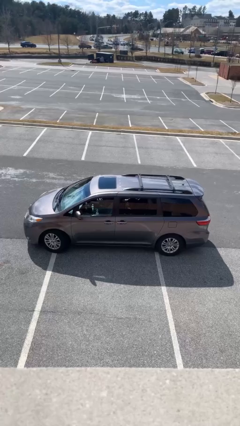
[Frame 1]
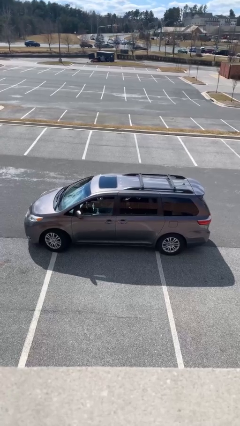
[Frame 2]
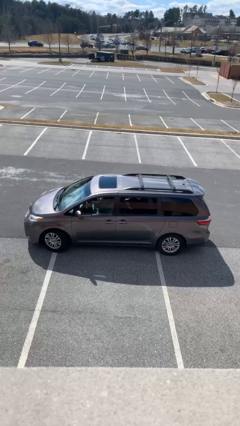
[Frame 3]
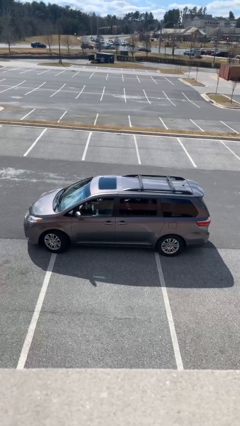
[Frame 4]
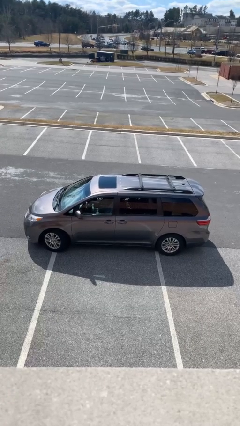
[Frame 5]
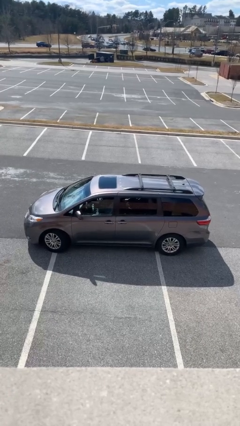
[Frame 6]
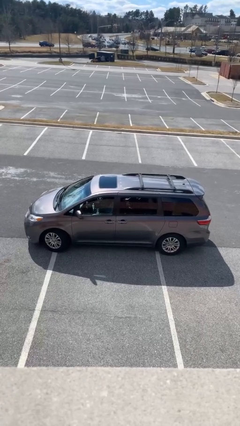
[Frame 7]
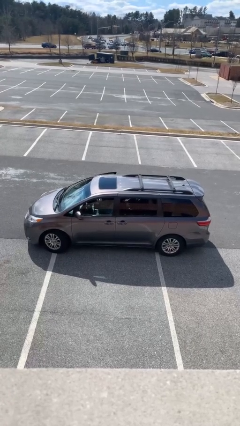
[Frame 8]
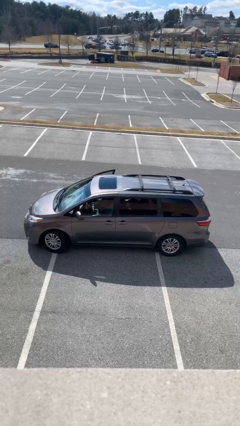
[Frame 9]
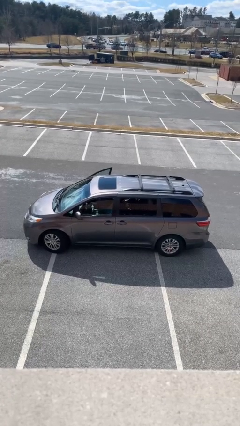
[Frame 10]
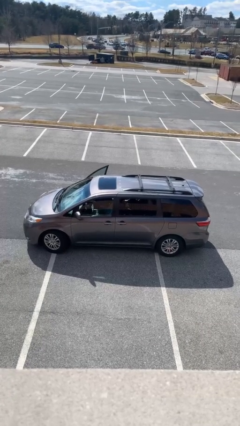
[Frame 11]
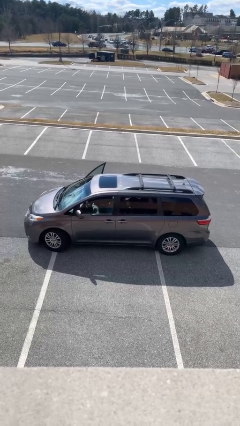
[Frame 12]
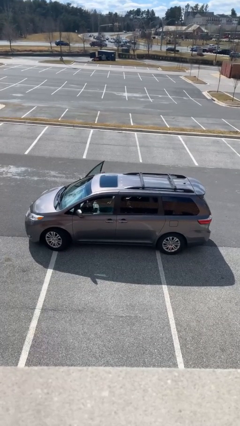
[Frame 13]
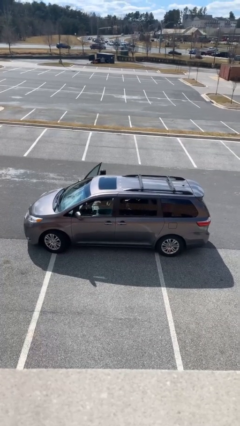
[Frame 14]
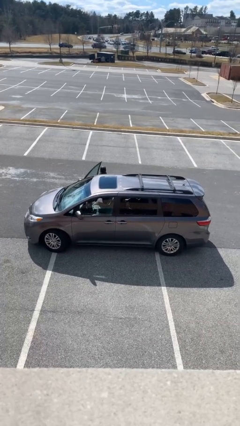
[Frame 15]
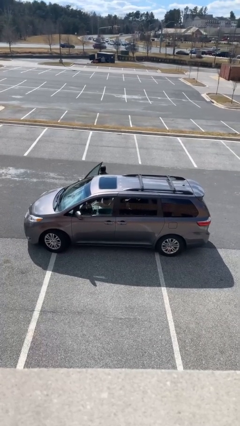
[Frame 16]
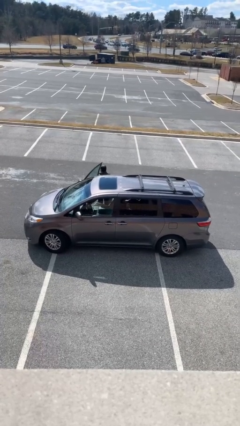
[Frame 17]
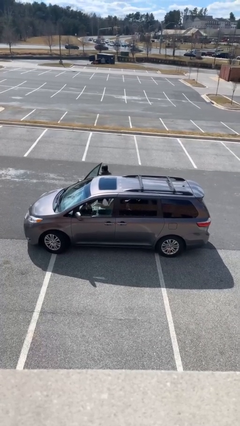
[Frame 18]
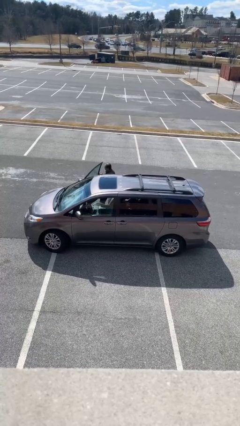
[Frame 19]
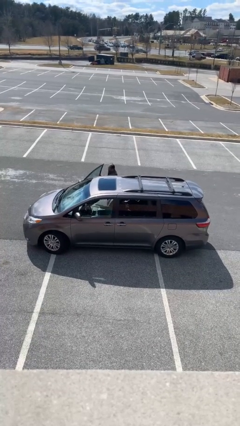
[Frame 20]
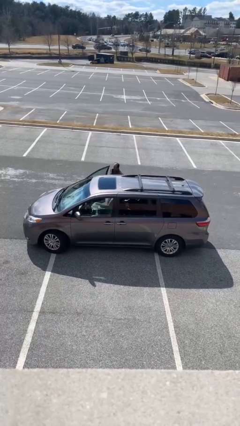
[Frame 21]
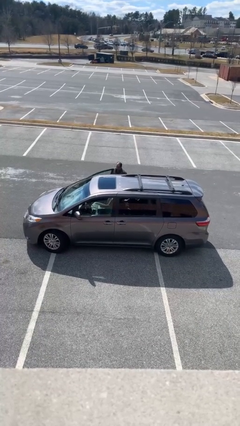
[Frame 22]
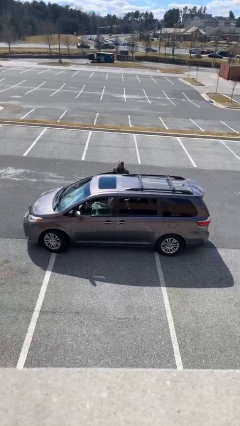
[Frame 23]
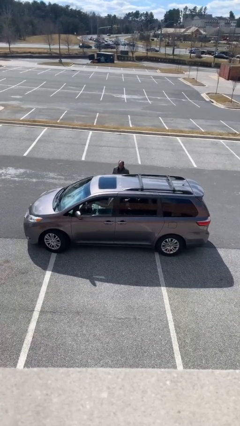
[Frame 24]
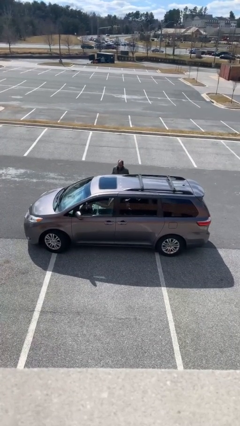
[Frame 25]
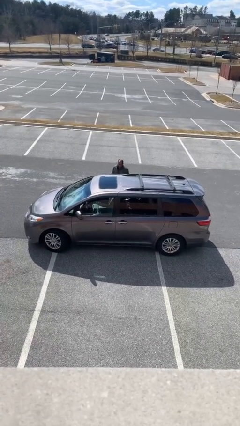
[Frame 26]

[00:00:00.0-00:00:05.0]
car drops off person

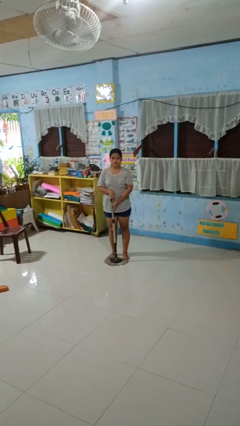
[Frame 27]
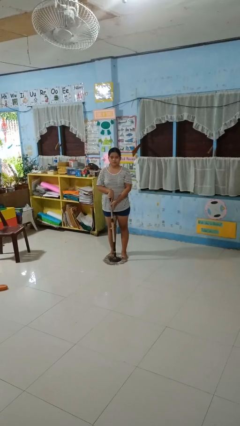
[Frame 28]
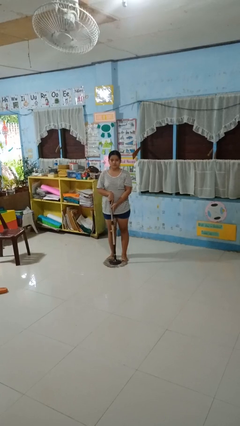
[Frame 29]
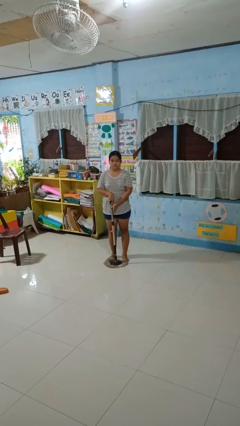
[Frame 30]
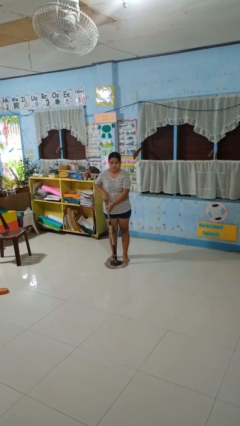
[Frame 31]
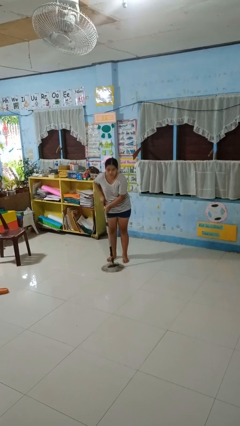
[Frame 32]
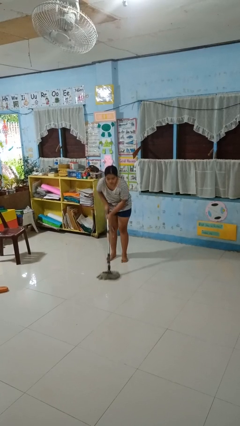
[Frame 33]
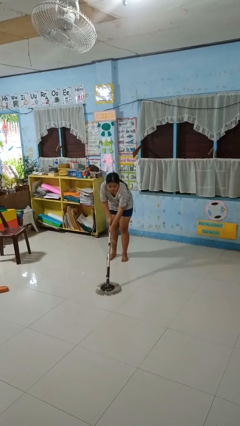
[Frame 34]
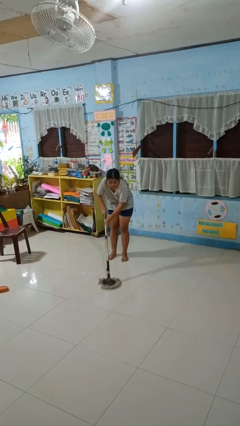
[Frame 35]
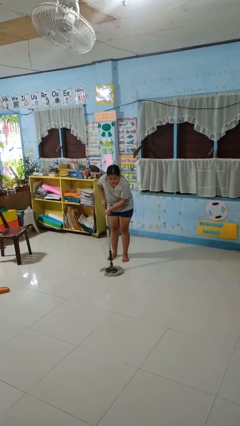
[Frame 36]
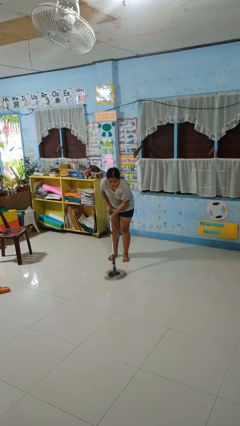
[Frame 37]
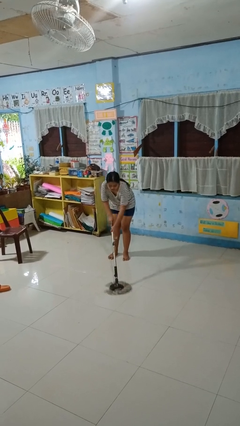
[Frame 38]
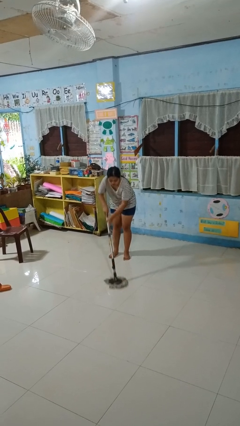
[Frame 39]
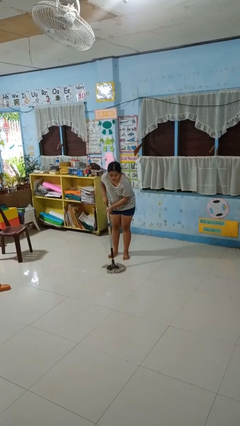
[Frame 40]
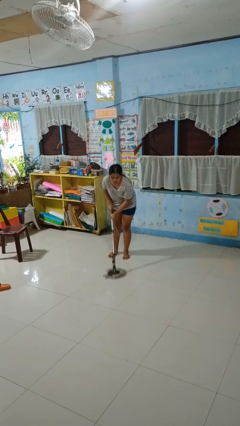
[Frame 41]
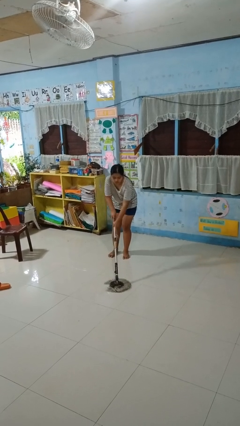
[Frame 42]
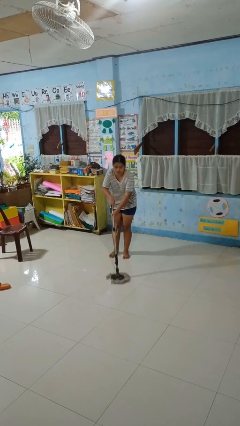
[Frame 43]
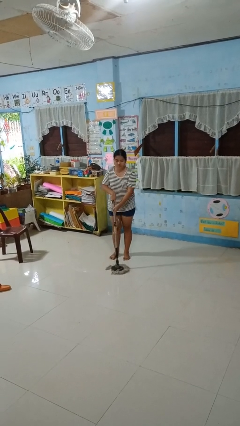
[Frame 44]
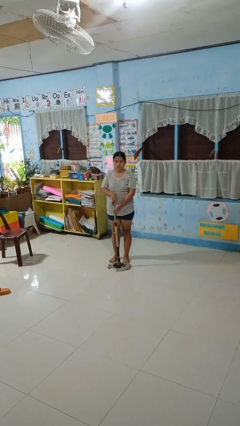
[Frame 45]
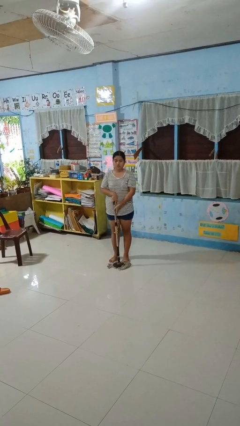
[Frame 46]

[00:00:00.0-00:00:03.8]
person mops

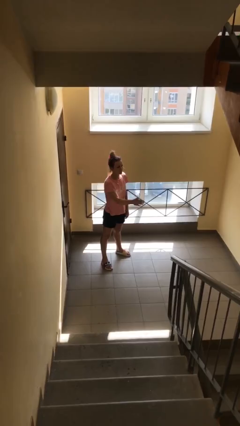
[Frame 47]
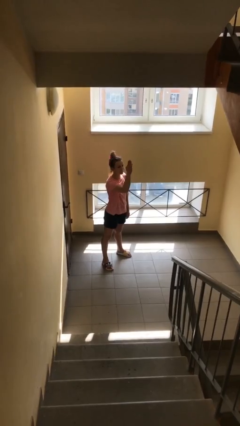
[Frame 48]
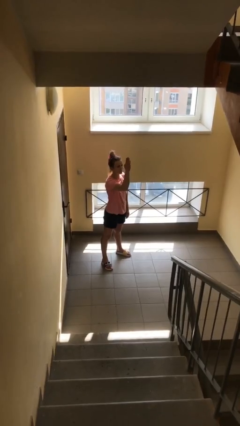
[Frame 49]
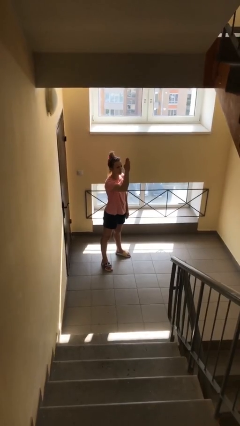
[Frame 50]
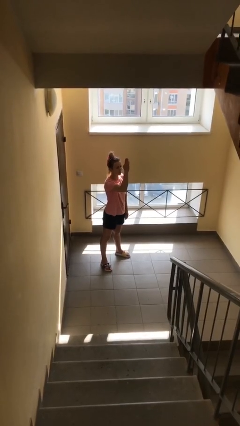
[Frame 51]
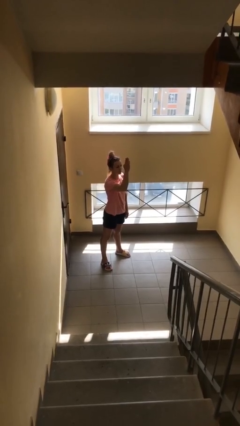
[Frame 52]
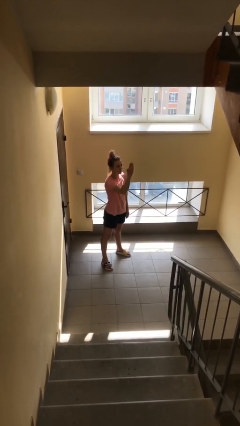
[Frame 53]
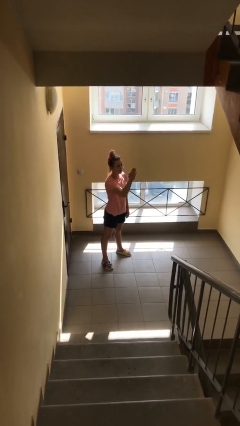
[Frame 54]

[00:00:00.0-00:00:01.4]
person gestures raise hand

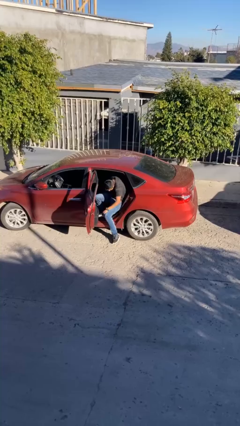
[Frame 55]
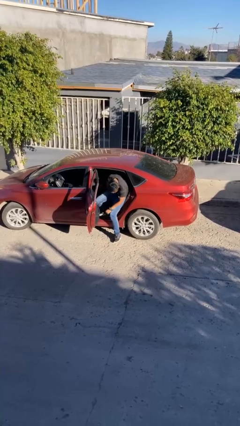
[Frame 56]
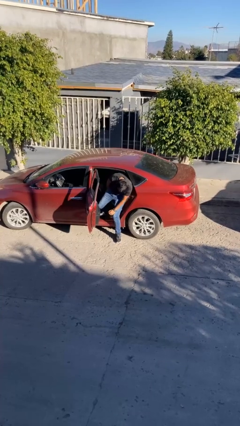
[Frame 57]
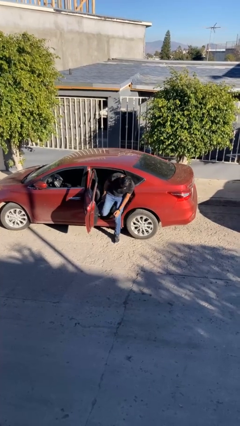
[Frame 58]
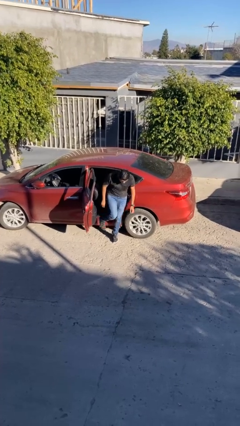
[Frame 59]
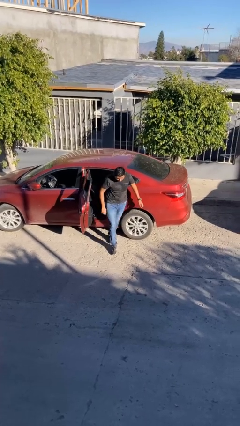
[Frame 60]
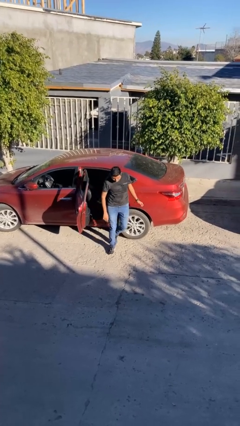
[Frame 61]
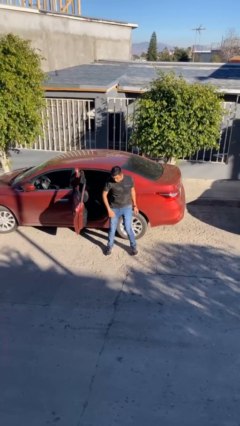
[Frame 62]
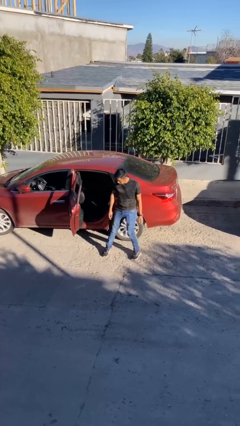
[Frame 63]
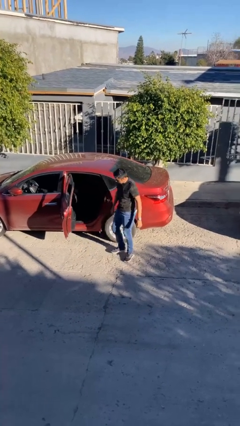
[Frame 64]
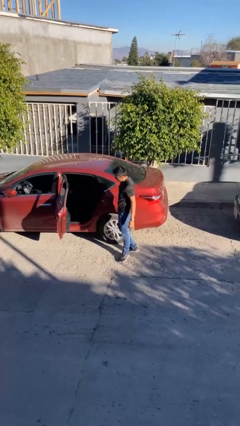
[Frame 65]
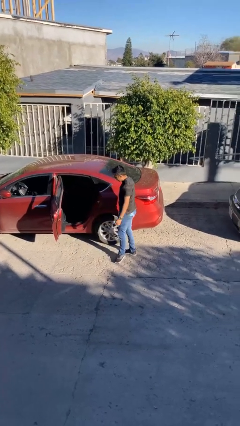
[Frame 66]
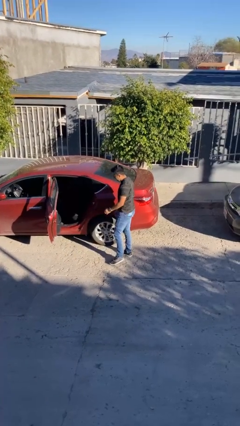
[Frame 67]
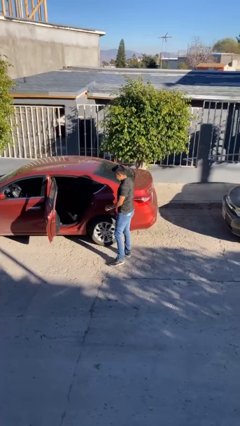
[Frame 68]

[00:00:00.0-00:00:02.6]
person exits car

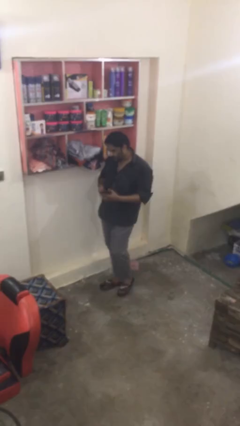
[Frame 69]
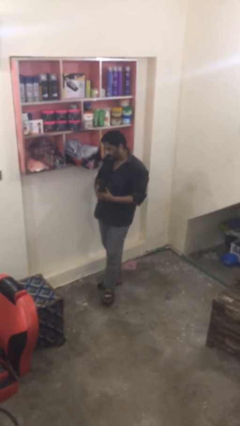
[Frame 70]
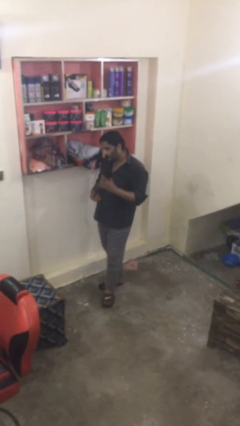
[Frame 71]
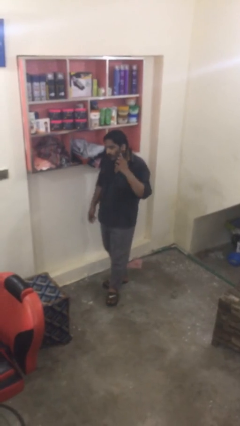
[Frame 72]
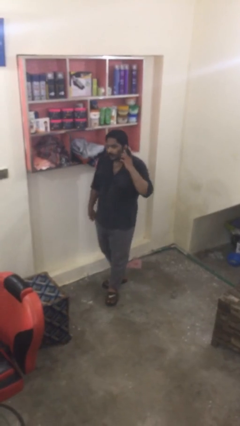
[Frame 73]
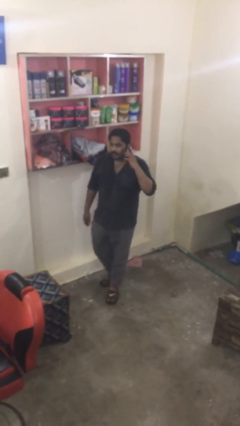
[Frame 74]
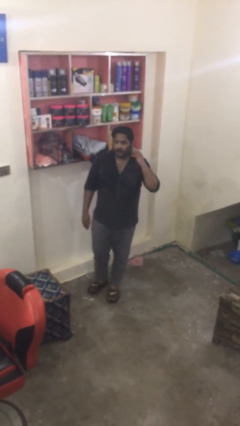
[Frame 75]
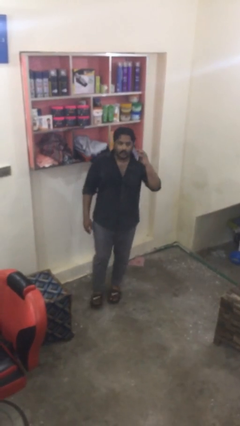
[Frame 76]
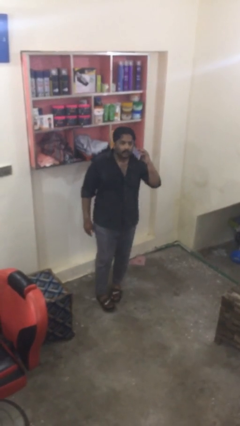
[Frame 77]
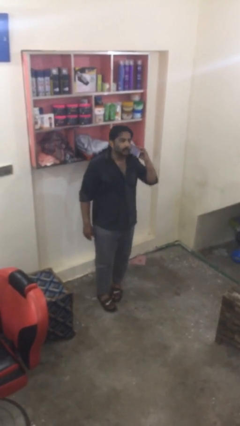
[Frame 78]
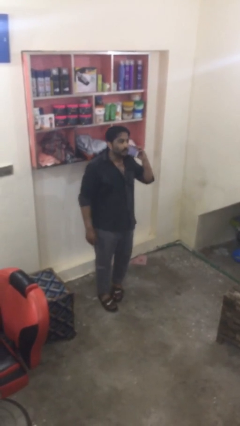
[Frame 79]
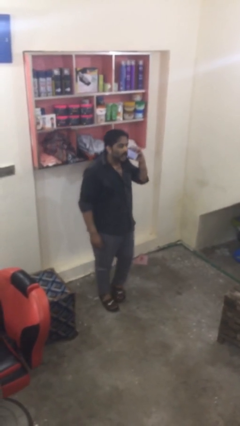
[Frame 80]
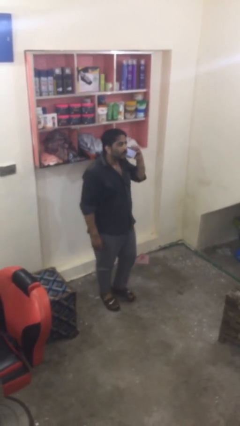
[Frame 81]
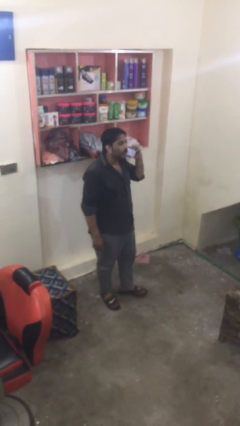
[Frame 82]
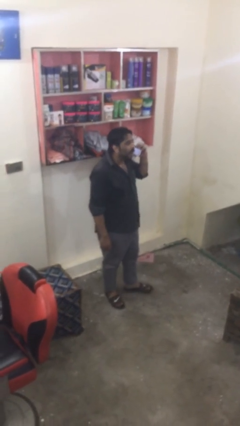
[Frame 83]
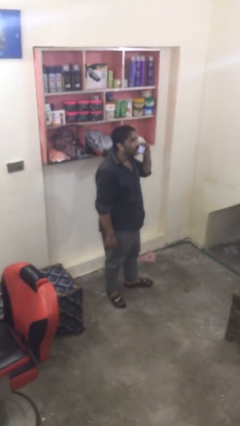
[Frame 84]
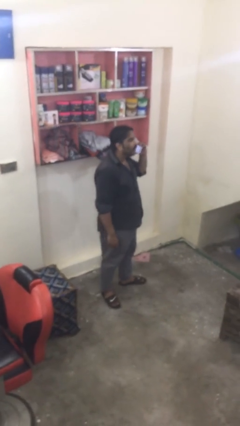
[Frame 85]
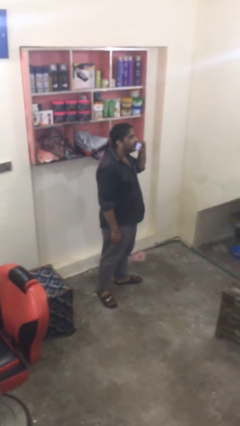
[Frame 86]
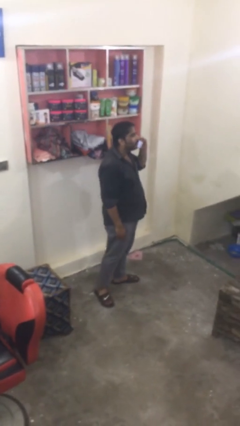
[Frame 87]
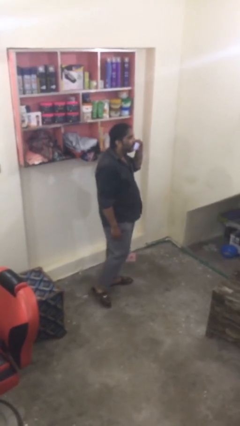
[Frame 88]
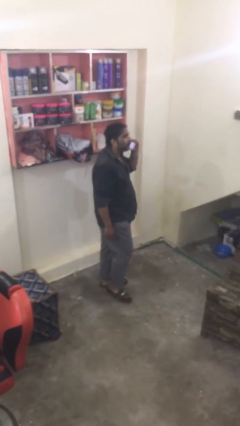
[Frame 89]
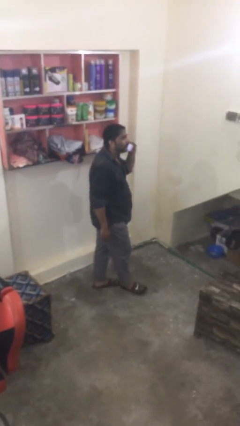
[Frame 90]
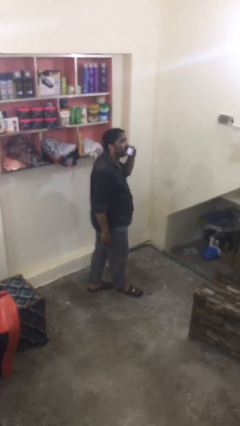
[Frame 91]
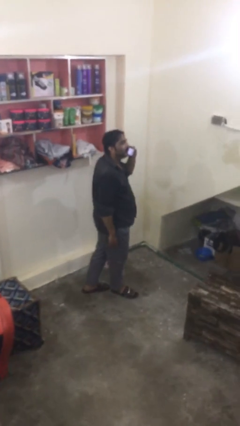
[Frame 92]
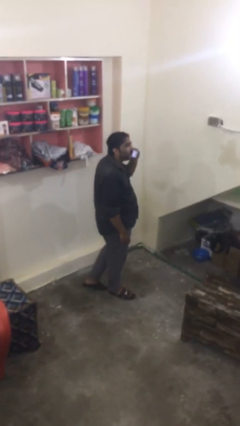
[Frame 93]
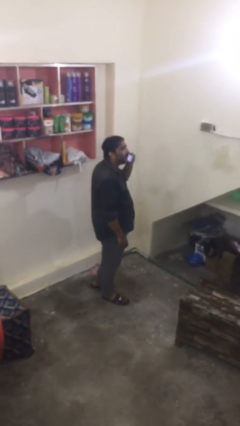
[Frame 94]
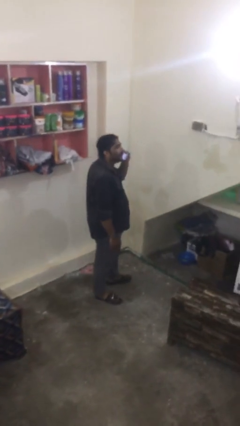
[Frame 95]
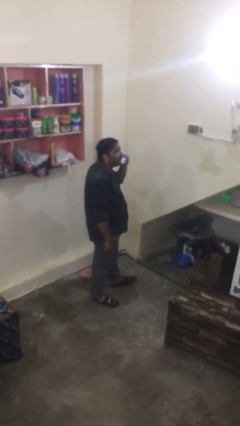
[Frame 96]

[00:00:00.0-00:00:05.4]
person talks on phone
